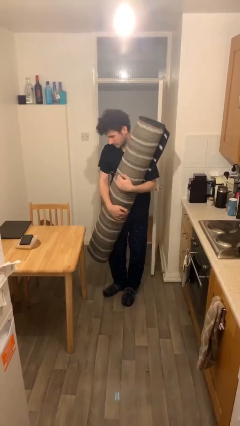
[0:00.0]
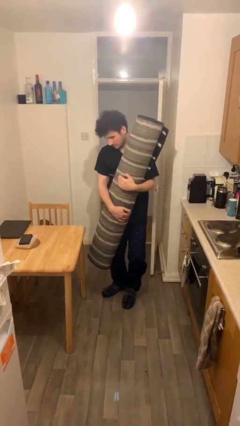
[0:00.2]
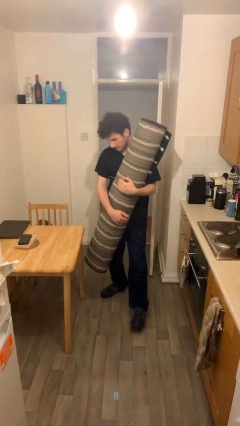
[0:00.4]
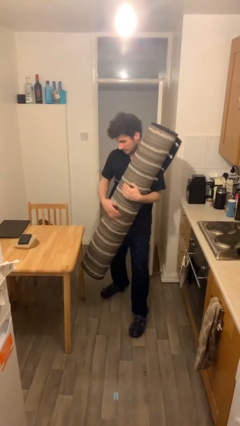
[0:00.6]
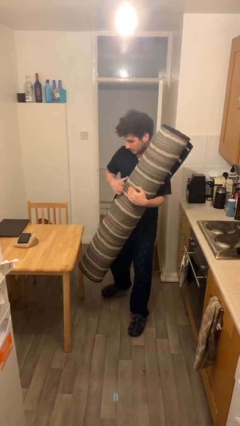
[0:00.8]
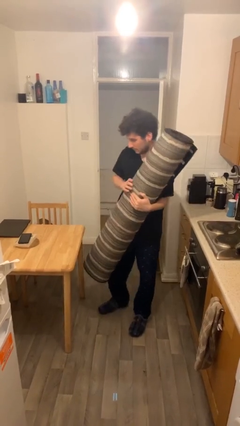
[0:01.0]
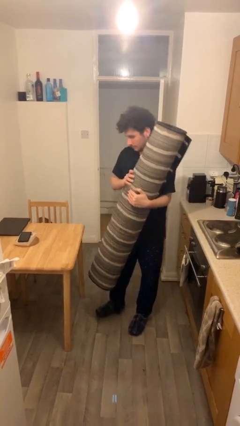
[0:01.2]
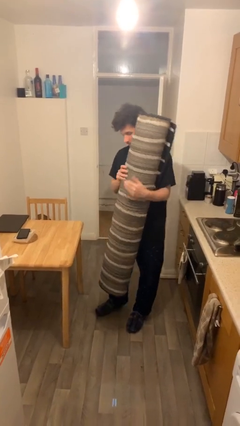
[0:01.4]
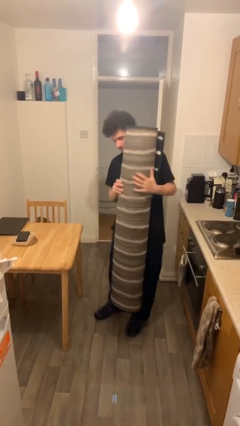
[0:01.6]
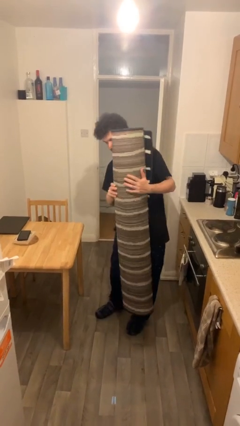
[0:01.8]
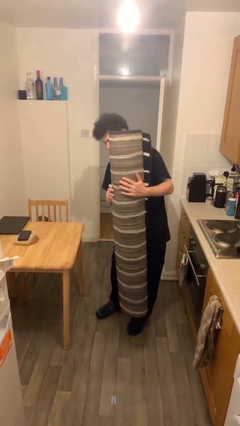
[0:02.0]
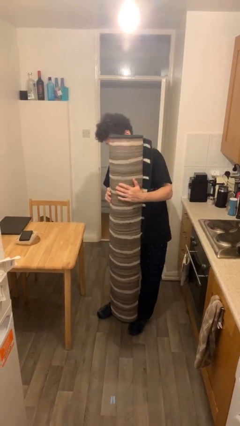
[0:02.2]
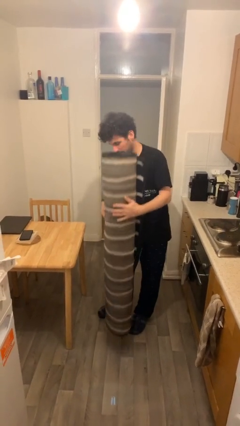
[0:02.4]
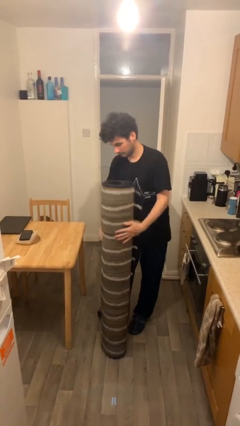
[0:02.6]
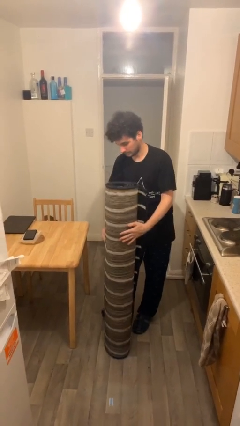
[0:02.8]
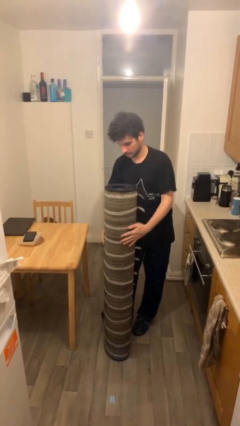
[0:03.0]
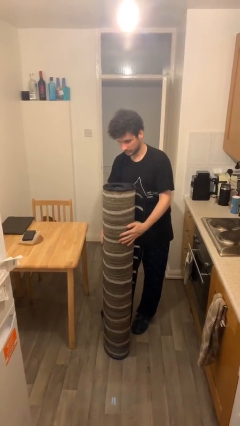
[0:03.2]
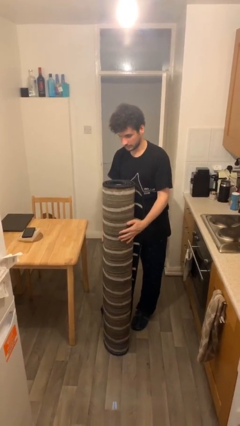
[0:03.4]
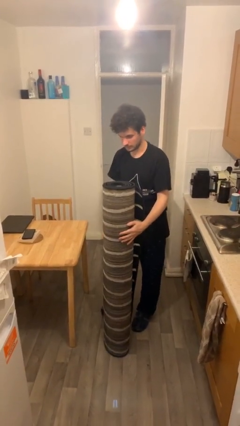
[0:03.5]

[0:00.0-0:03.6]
person puts down object on floor

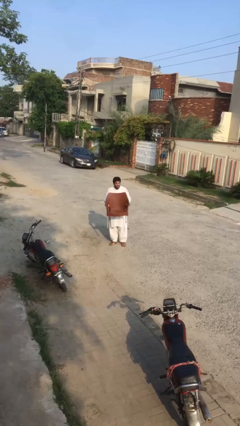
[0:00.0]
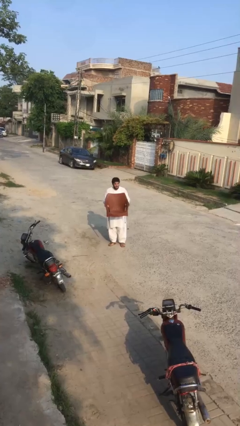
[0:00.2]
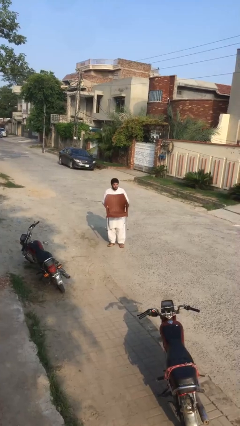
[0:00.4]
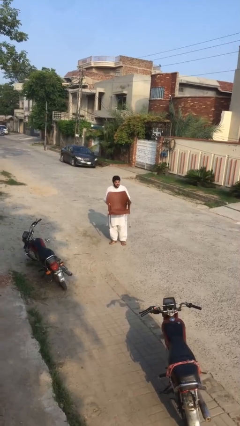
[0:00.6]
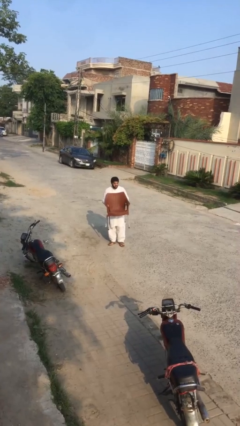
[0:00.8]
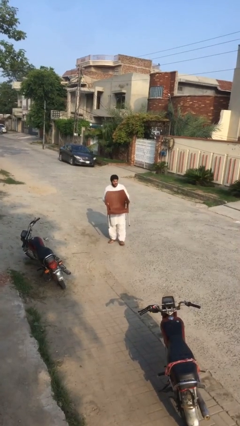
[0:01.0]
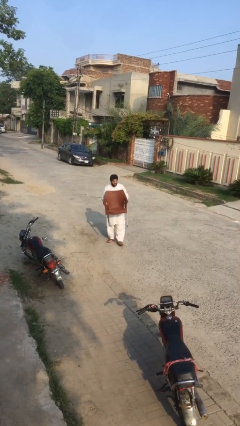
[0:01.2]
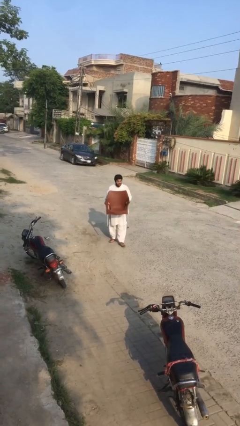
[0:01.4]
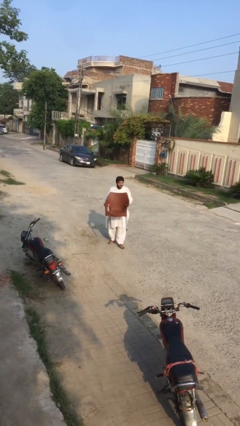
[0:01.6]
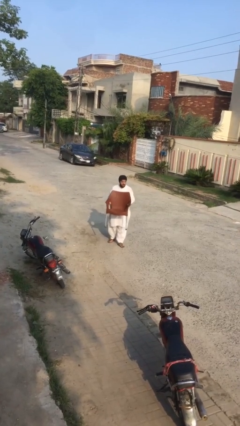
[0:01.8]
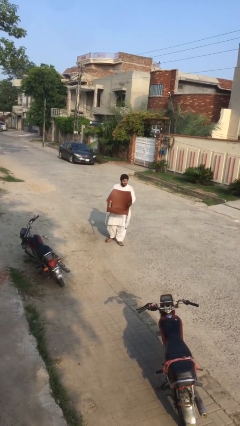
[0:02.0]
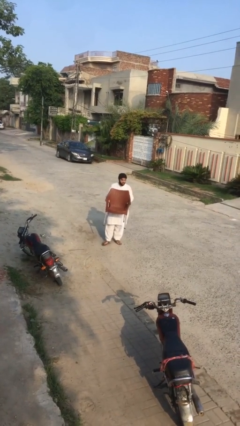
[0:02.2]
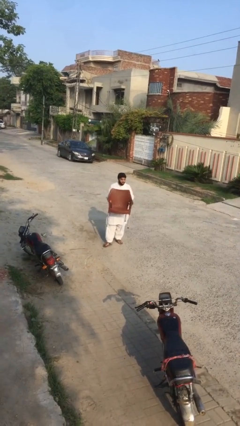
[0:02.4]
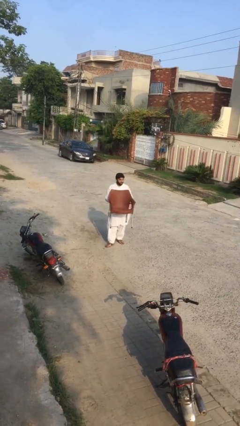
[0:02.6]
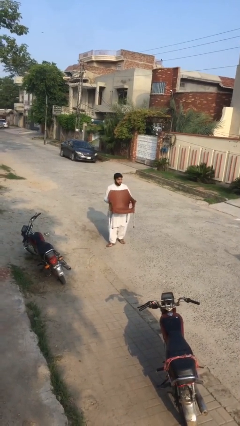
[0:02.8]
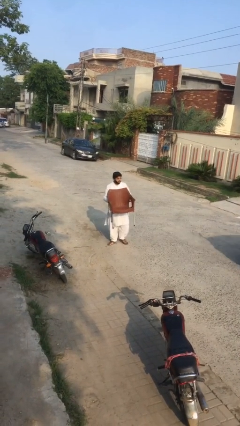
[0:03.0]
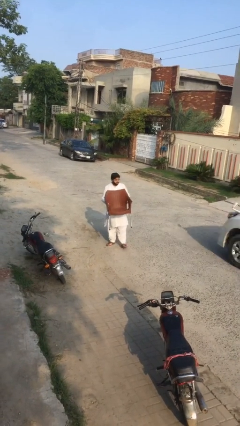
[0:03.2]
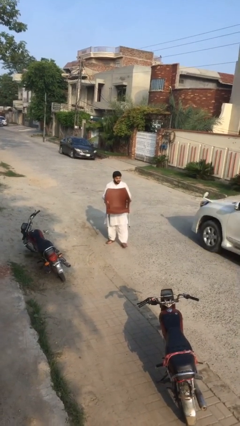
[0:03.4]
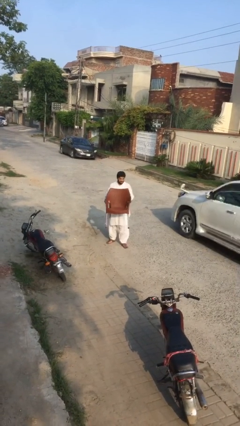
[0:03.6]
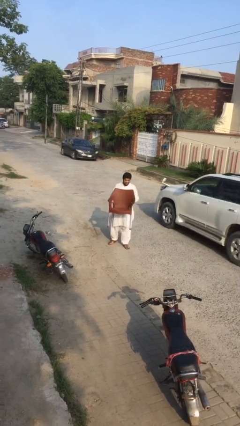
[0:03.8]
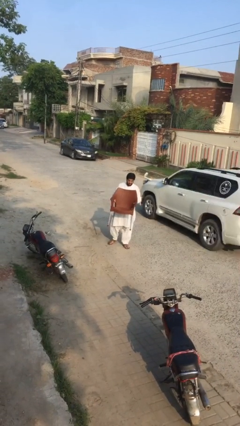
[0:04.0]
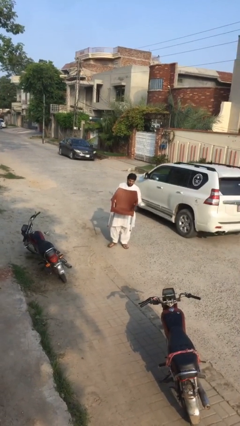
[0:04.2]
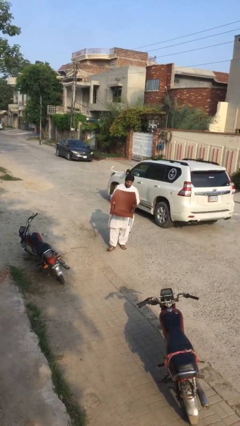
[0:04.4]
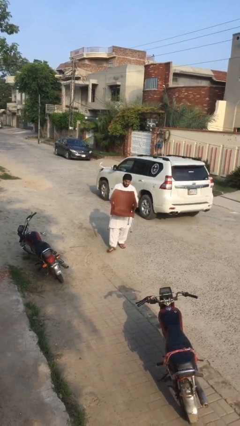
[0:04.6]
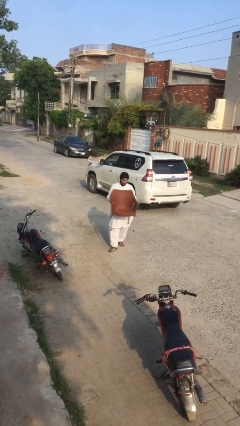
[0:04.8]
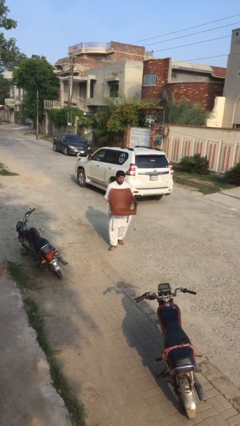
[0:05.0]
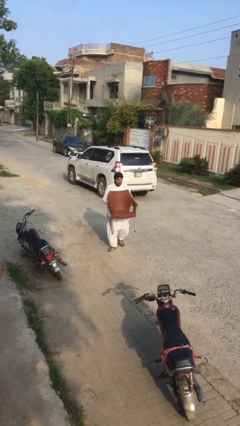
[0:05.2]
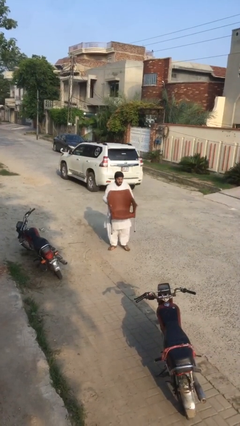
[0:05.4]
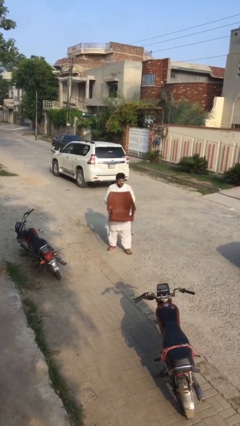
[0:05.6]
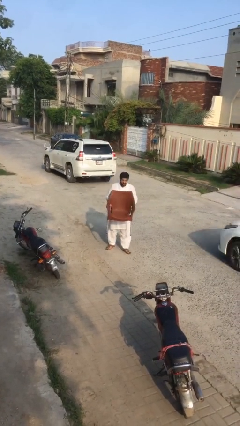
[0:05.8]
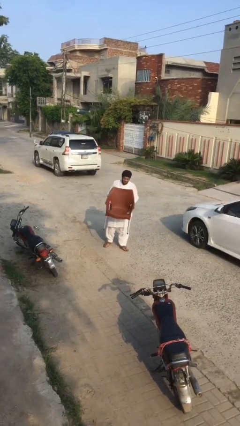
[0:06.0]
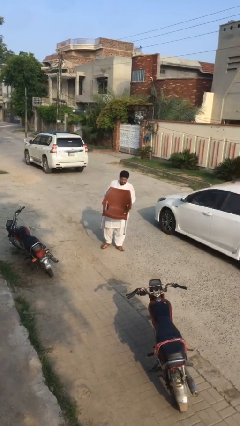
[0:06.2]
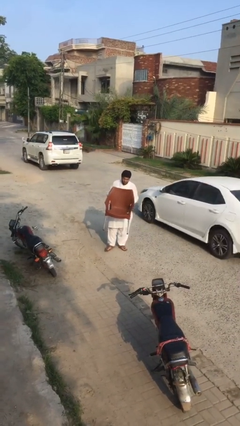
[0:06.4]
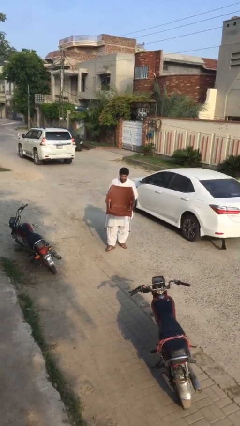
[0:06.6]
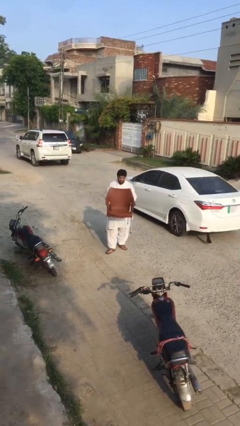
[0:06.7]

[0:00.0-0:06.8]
person carries heavy object

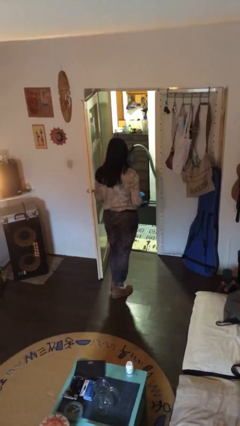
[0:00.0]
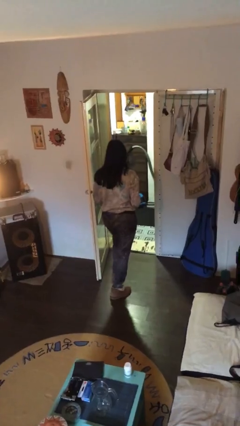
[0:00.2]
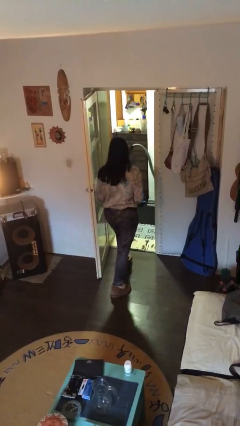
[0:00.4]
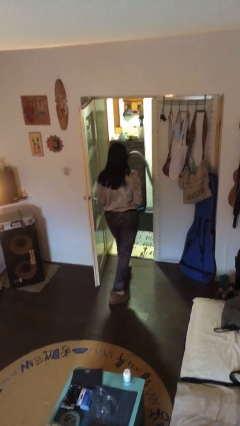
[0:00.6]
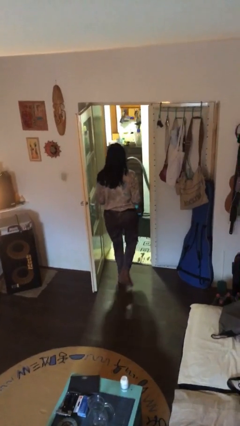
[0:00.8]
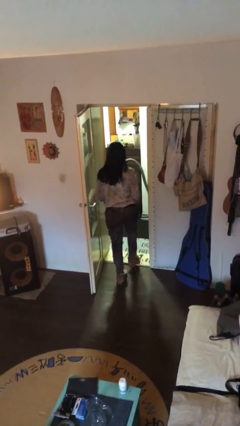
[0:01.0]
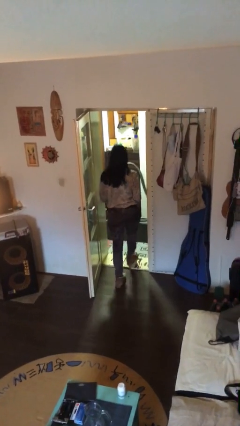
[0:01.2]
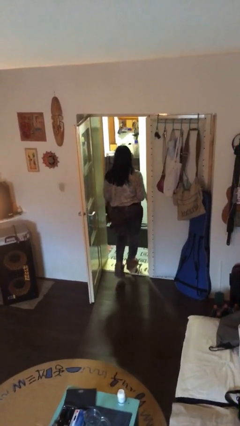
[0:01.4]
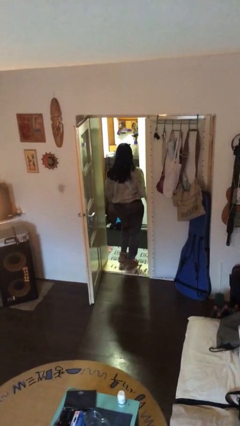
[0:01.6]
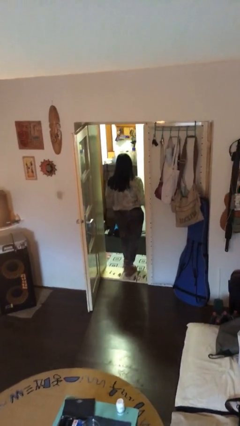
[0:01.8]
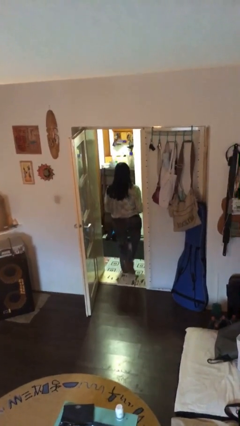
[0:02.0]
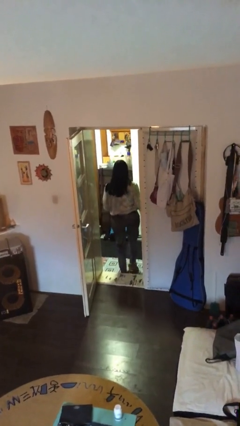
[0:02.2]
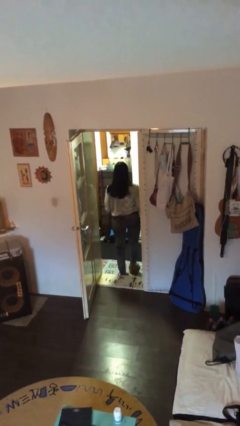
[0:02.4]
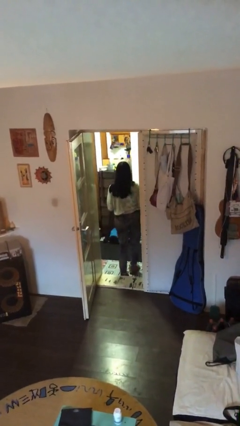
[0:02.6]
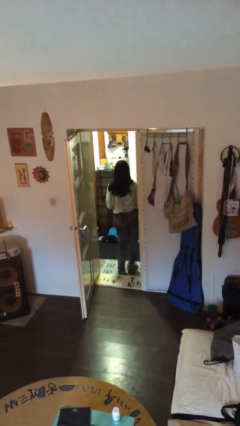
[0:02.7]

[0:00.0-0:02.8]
person exits scene through structure

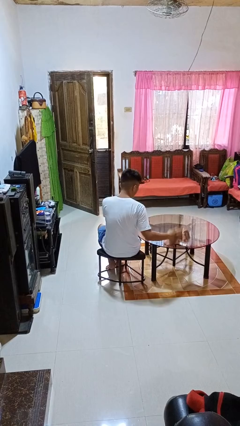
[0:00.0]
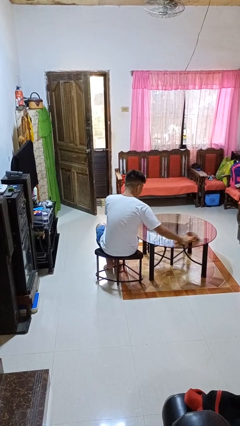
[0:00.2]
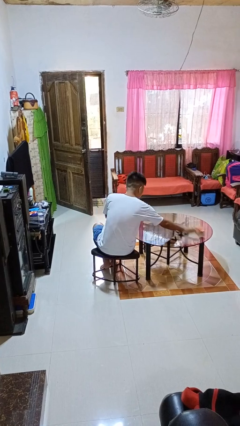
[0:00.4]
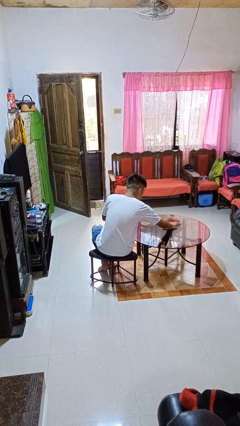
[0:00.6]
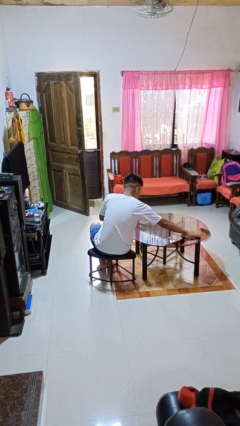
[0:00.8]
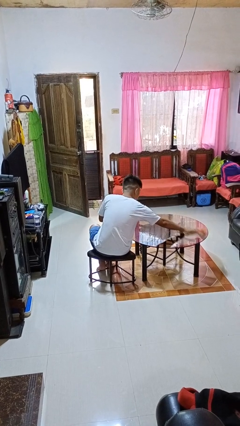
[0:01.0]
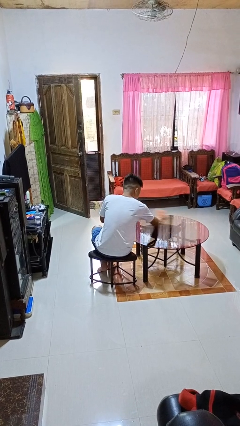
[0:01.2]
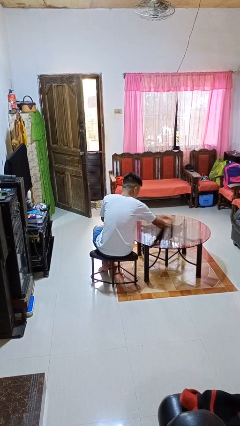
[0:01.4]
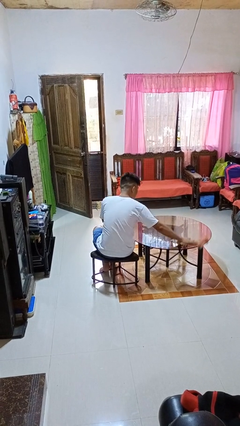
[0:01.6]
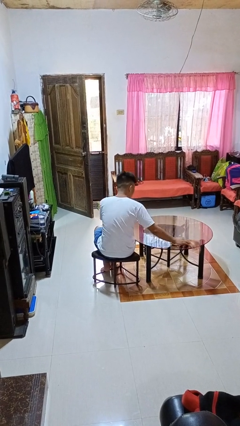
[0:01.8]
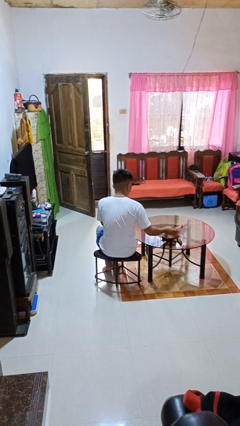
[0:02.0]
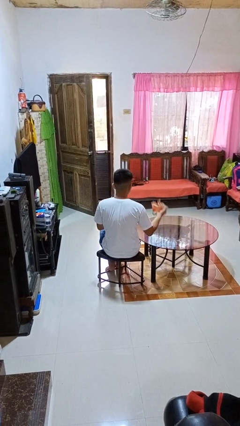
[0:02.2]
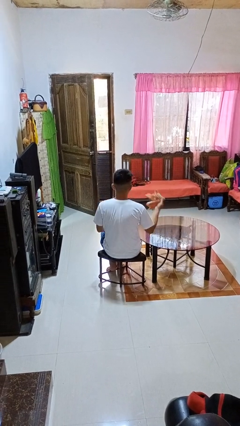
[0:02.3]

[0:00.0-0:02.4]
person cleans table with rag

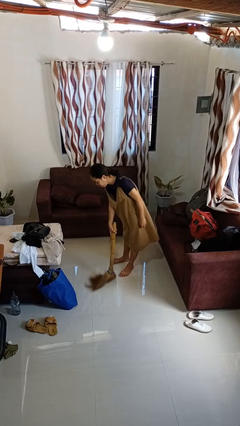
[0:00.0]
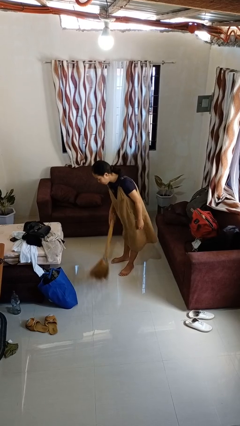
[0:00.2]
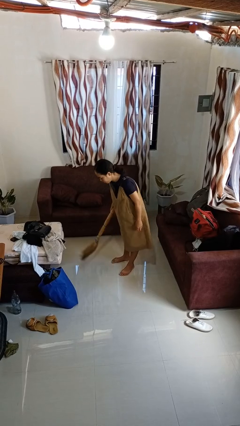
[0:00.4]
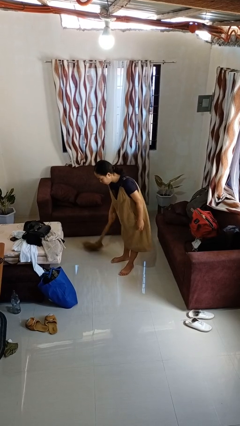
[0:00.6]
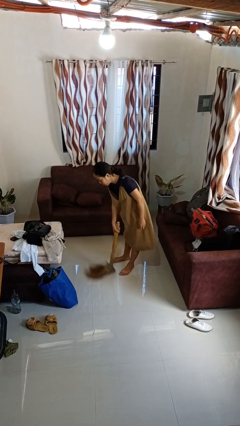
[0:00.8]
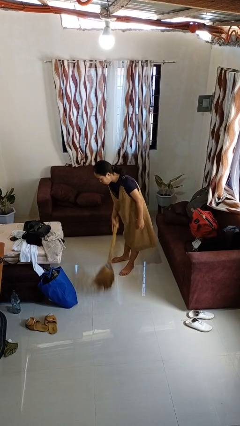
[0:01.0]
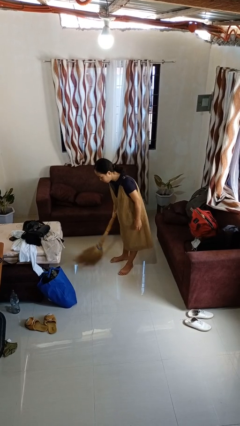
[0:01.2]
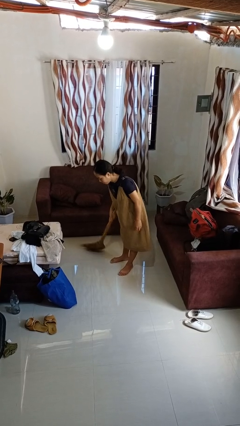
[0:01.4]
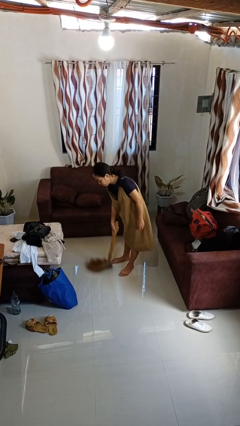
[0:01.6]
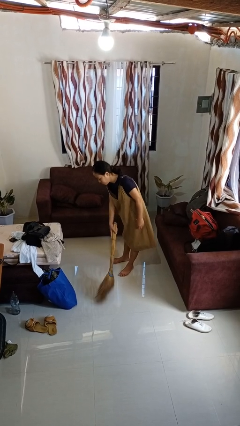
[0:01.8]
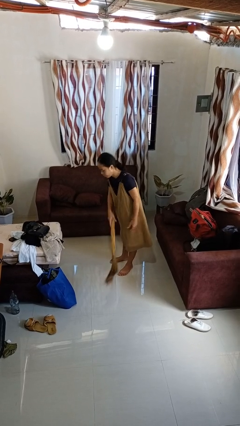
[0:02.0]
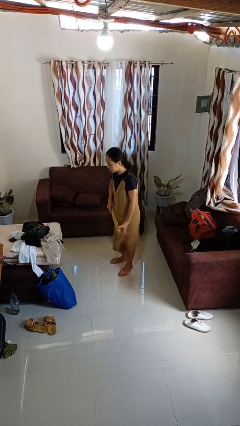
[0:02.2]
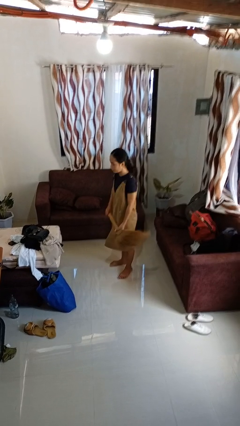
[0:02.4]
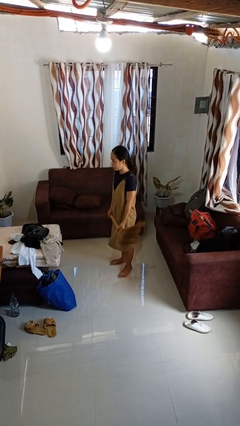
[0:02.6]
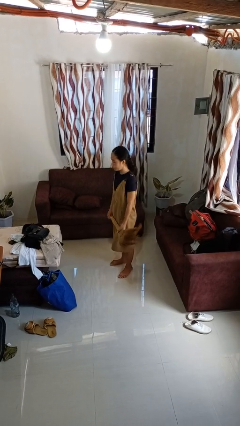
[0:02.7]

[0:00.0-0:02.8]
person sweeps floor
